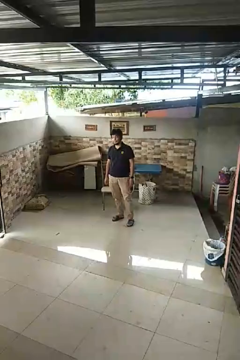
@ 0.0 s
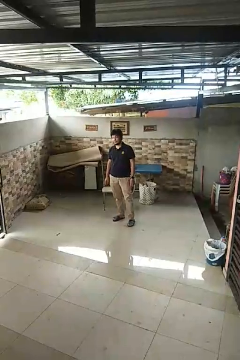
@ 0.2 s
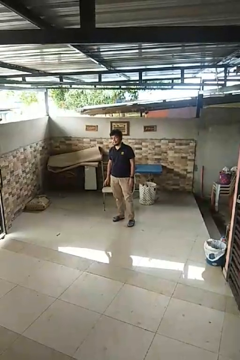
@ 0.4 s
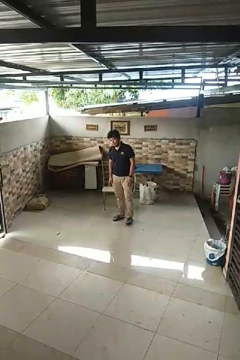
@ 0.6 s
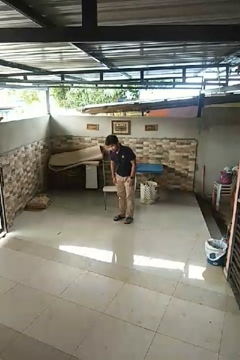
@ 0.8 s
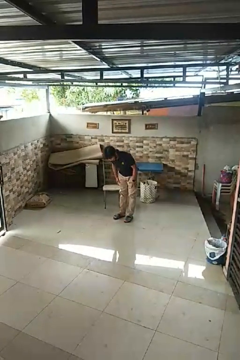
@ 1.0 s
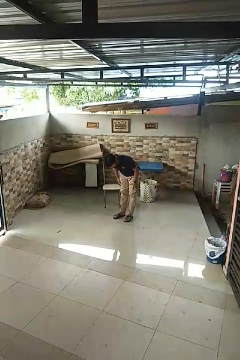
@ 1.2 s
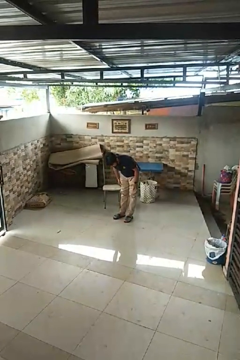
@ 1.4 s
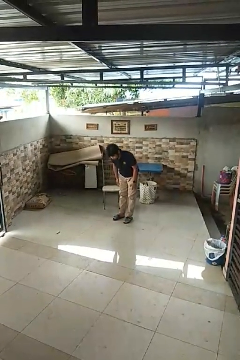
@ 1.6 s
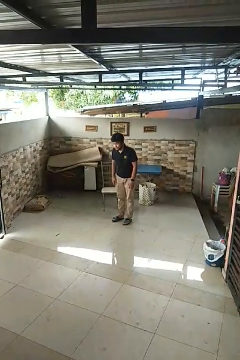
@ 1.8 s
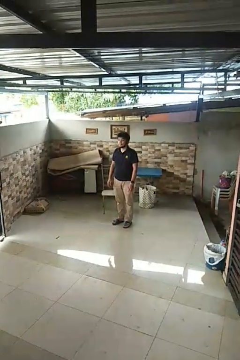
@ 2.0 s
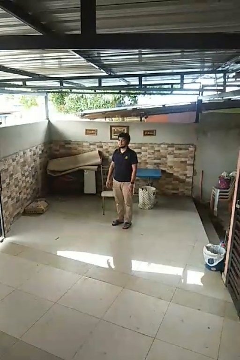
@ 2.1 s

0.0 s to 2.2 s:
person bows

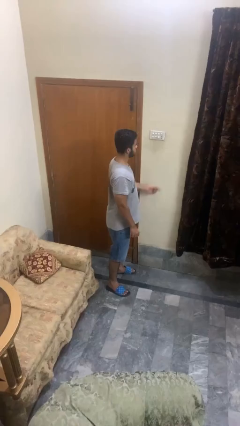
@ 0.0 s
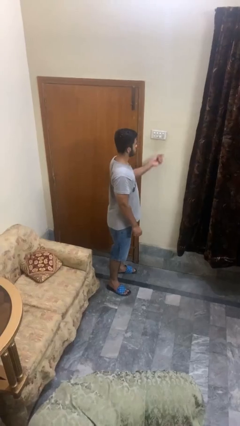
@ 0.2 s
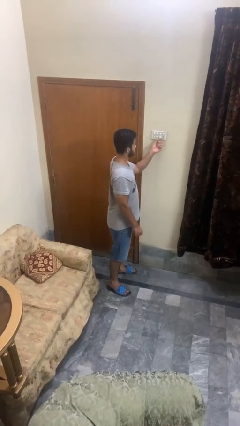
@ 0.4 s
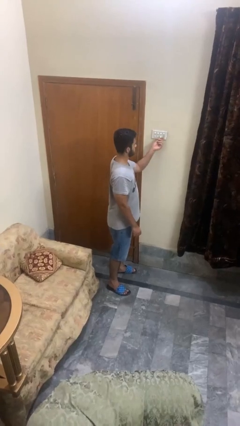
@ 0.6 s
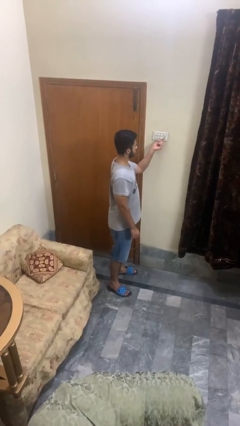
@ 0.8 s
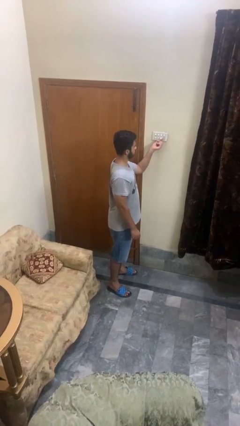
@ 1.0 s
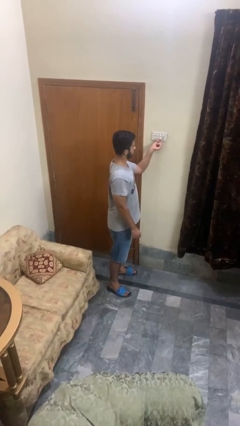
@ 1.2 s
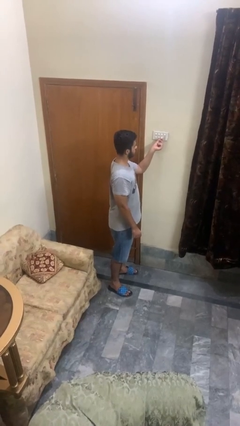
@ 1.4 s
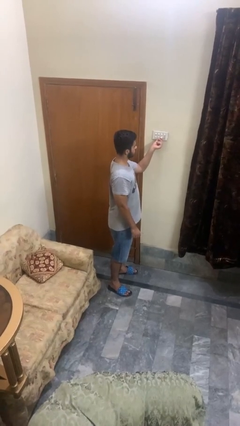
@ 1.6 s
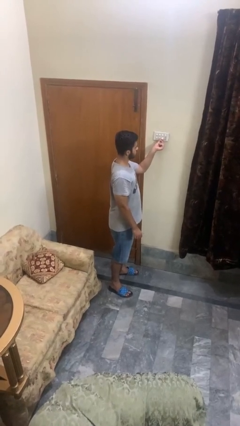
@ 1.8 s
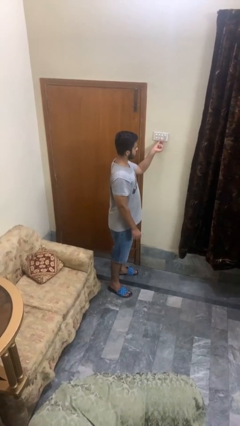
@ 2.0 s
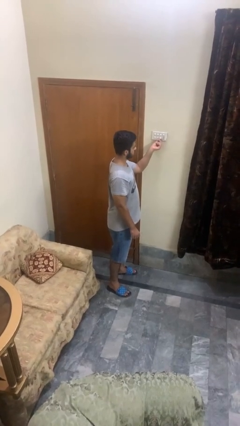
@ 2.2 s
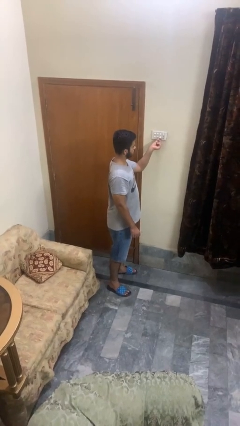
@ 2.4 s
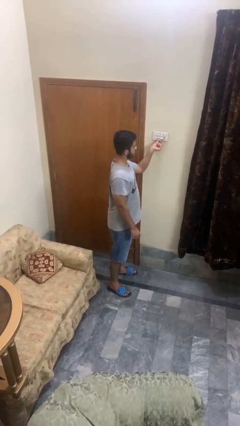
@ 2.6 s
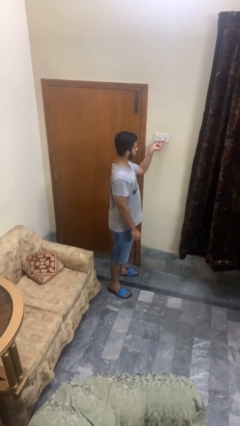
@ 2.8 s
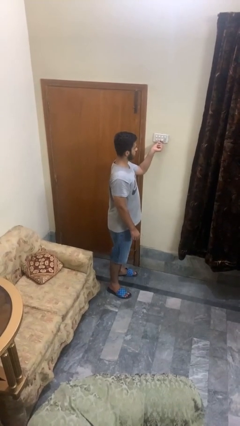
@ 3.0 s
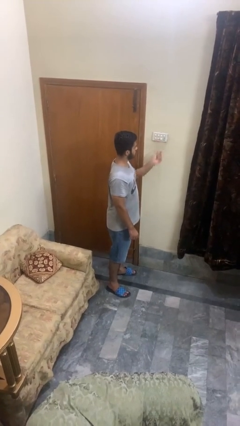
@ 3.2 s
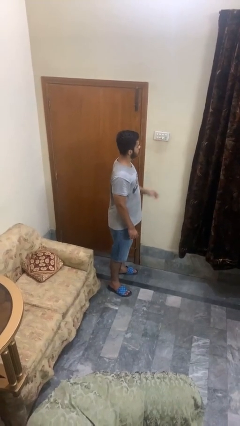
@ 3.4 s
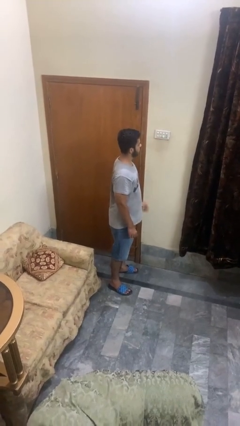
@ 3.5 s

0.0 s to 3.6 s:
person adjusts thermostat

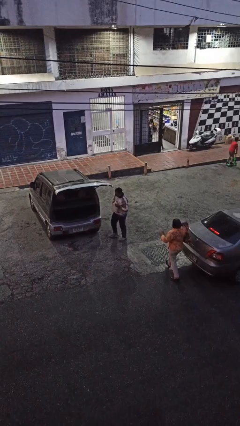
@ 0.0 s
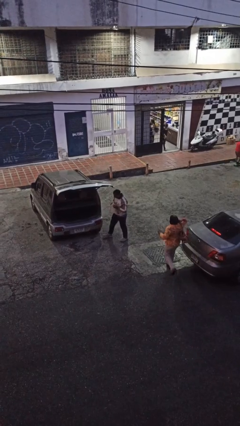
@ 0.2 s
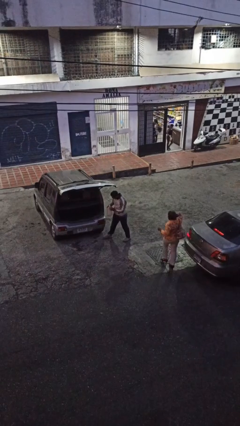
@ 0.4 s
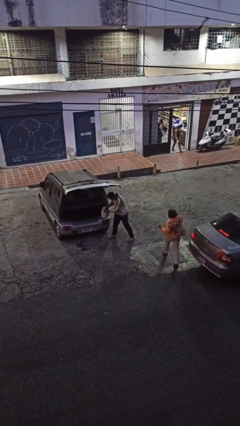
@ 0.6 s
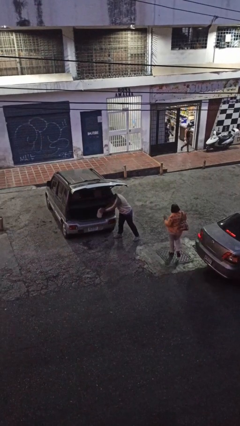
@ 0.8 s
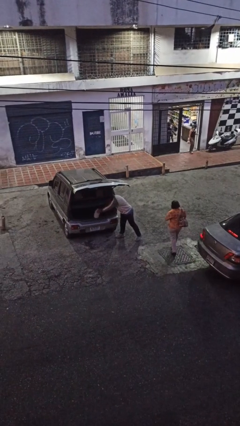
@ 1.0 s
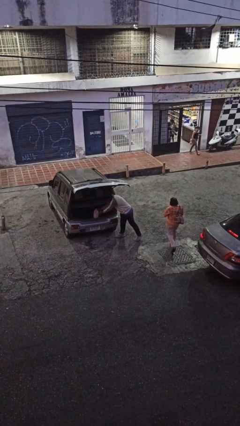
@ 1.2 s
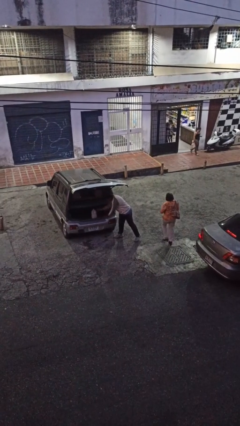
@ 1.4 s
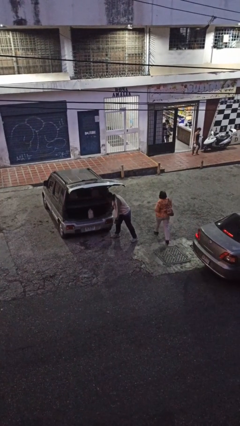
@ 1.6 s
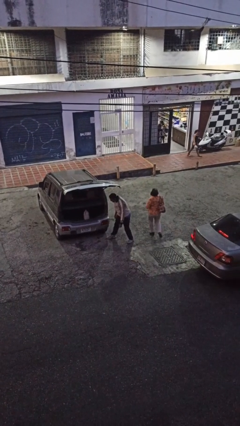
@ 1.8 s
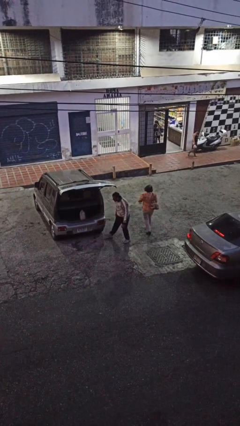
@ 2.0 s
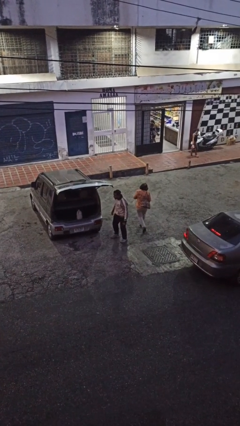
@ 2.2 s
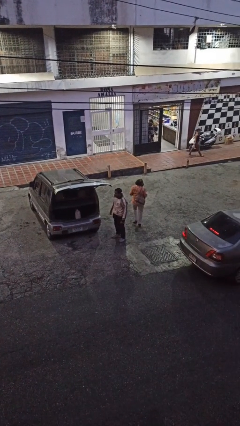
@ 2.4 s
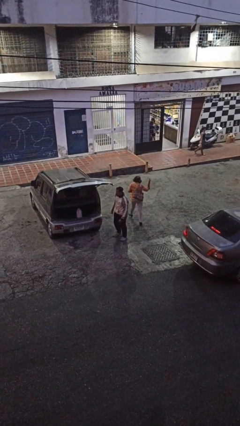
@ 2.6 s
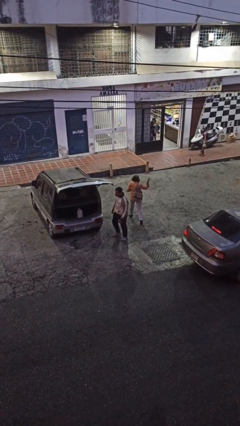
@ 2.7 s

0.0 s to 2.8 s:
person loads car

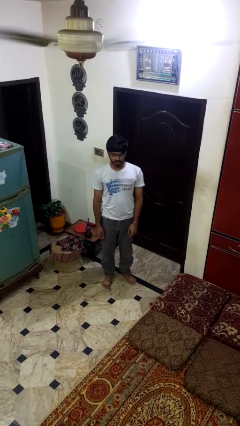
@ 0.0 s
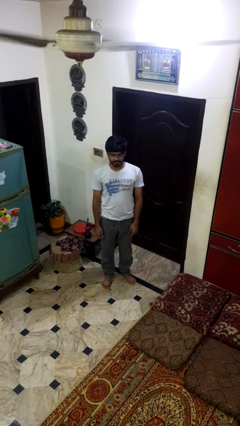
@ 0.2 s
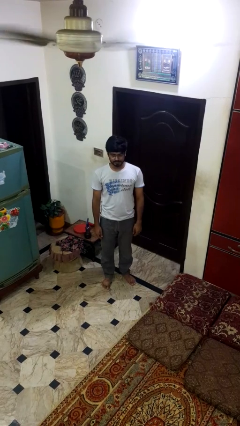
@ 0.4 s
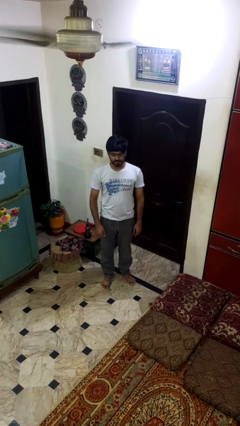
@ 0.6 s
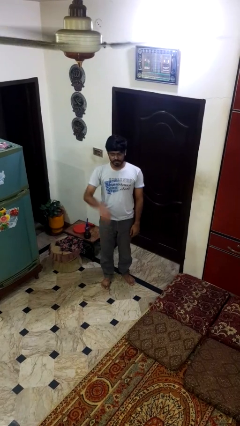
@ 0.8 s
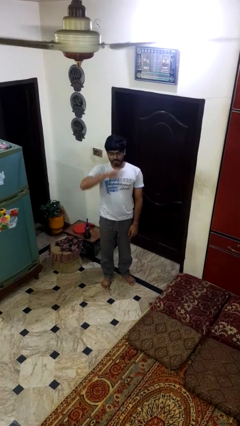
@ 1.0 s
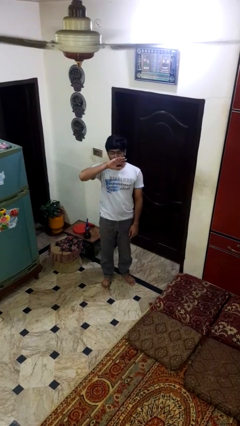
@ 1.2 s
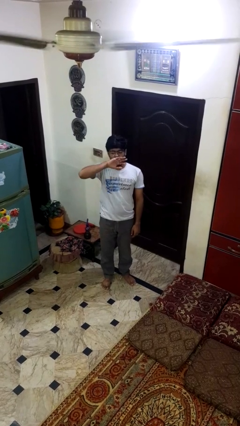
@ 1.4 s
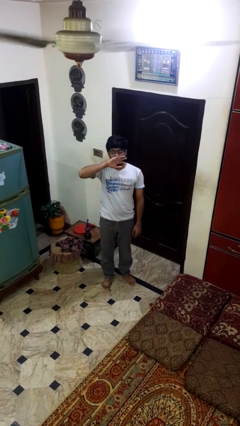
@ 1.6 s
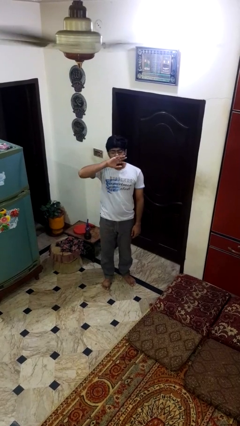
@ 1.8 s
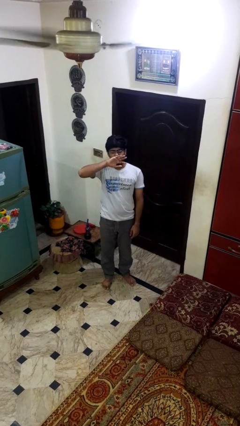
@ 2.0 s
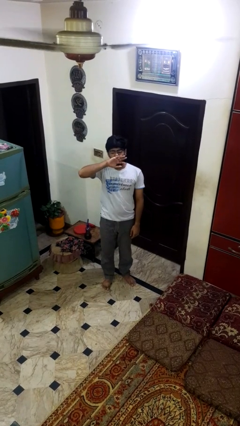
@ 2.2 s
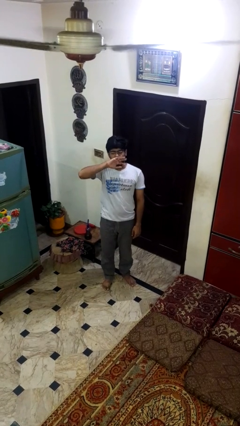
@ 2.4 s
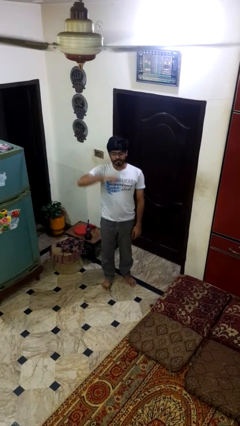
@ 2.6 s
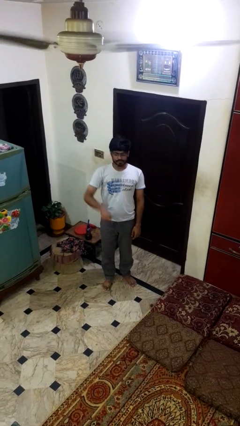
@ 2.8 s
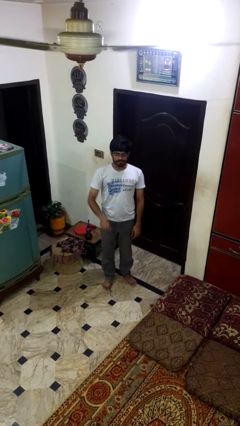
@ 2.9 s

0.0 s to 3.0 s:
person yawns

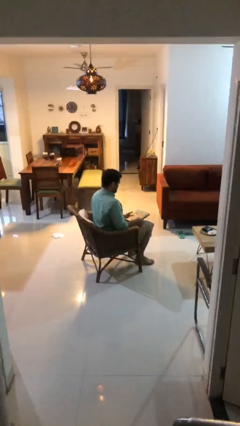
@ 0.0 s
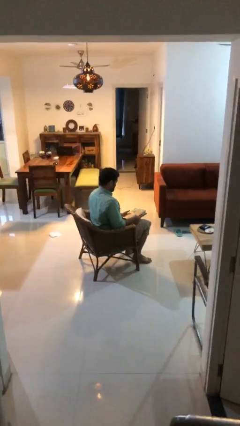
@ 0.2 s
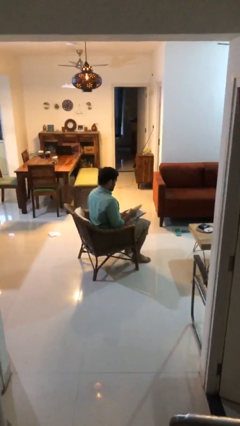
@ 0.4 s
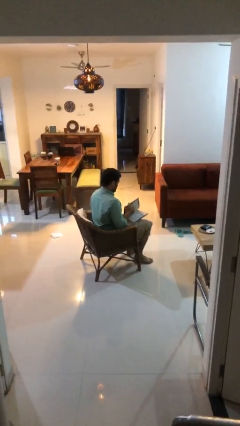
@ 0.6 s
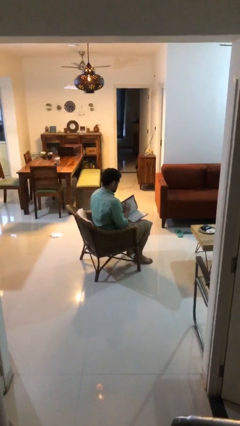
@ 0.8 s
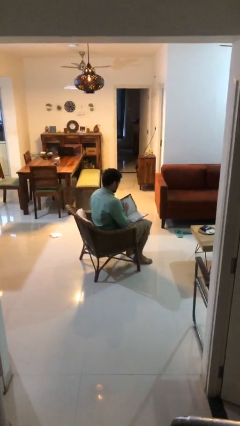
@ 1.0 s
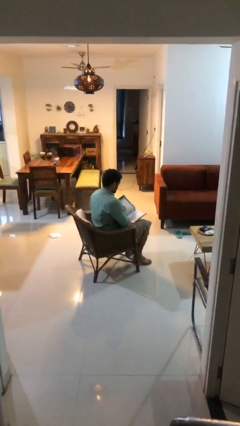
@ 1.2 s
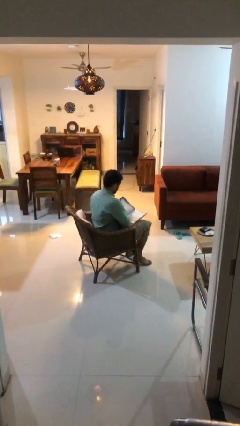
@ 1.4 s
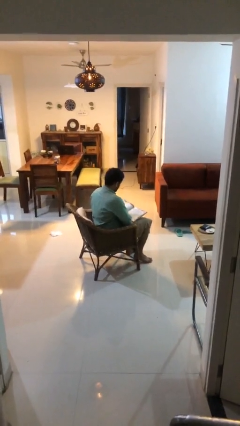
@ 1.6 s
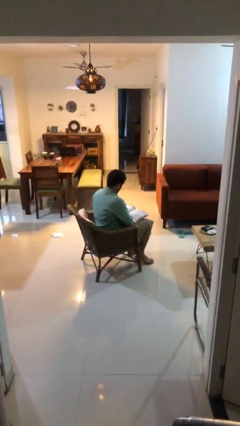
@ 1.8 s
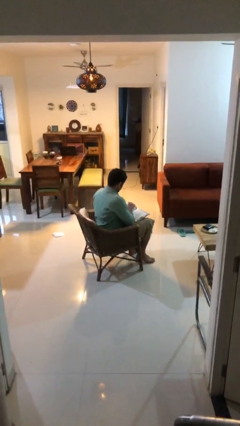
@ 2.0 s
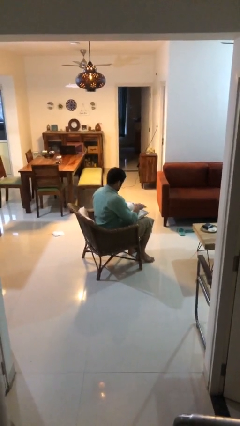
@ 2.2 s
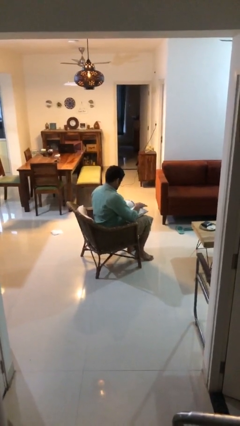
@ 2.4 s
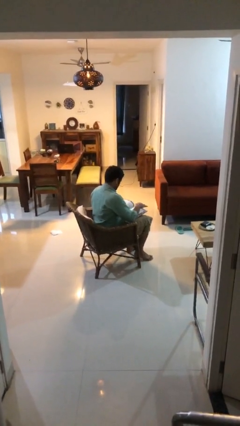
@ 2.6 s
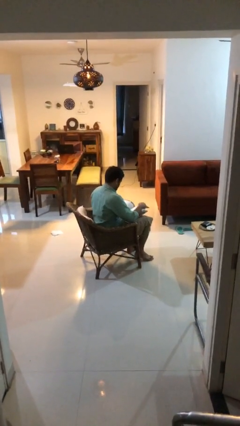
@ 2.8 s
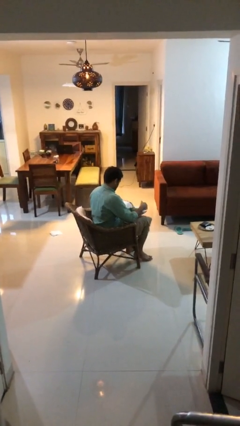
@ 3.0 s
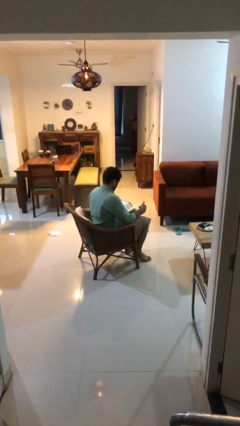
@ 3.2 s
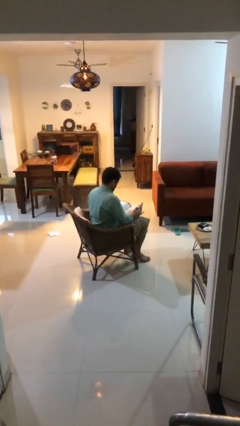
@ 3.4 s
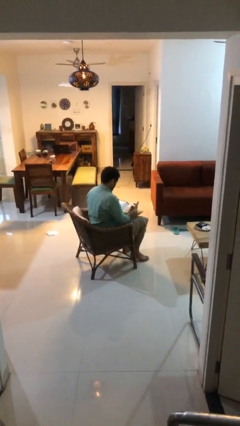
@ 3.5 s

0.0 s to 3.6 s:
person reads document

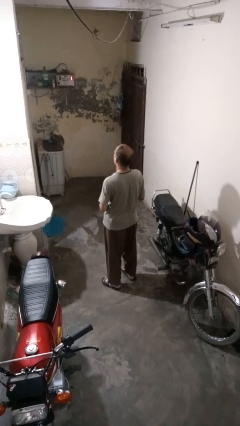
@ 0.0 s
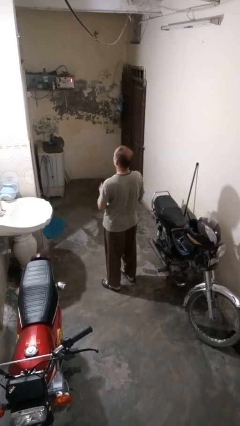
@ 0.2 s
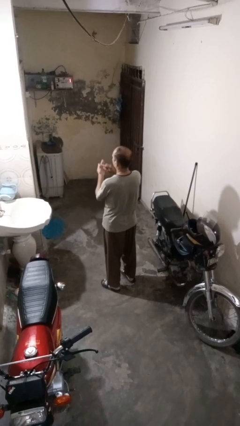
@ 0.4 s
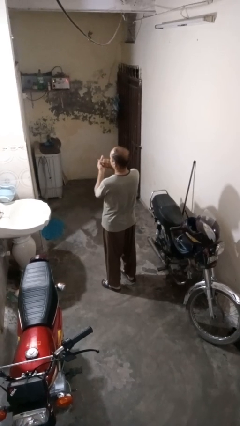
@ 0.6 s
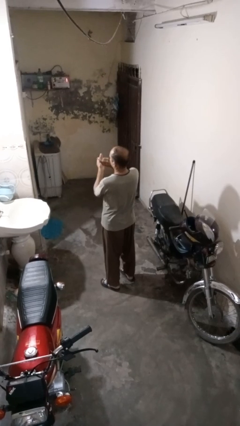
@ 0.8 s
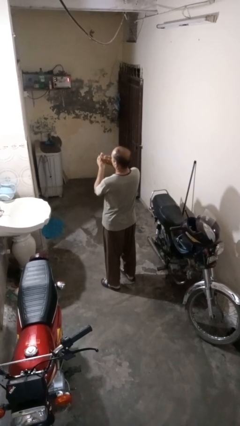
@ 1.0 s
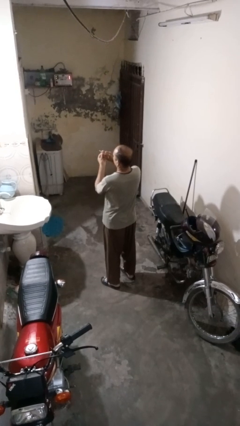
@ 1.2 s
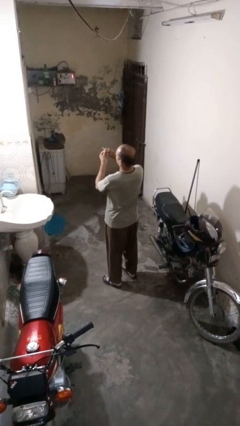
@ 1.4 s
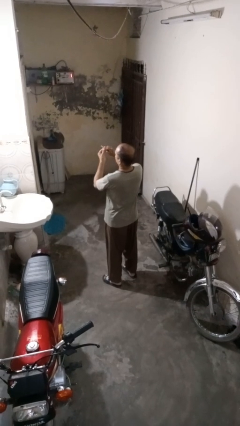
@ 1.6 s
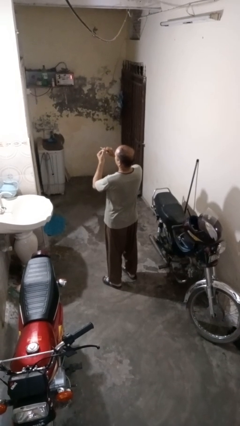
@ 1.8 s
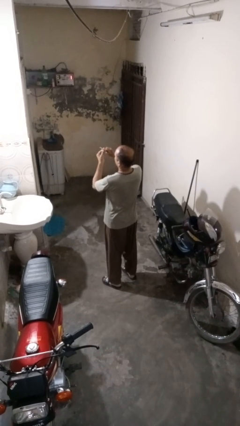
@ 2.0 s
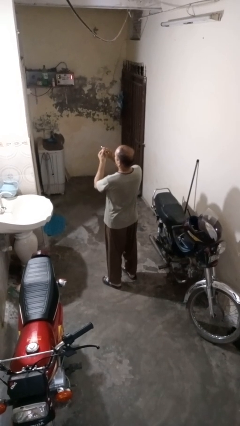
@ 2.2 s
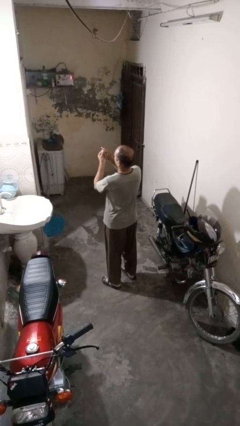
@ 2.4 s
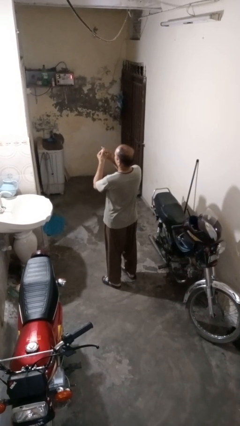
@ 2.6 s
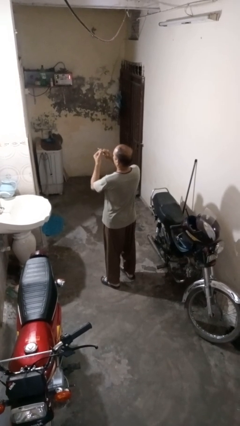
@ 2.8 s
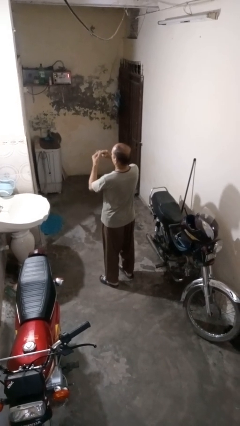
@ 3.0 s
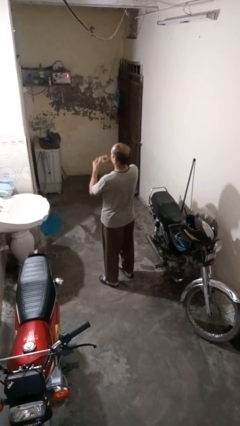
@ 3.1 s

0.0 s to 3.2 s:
person files fingernails
